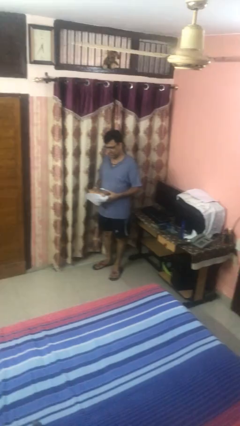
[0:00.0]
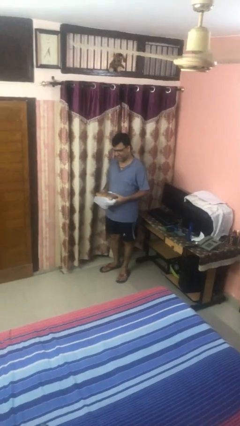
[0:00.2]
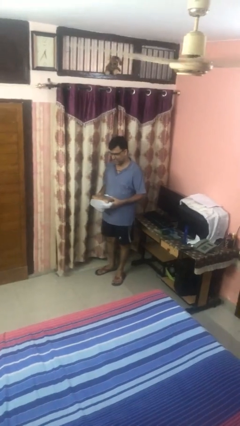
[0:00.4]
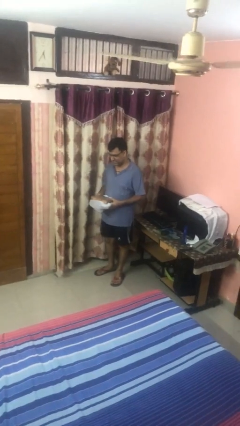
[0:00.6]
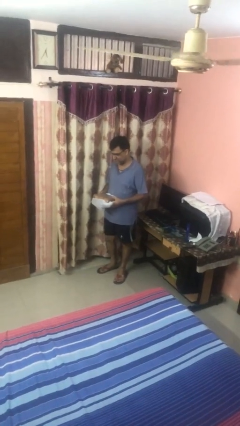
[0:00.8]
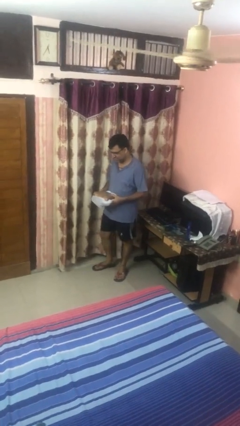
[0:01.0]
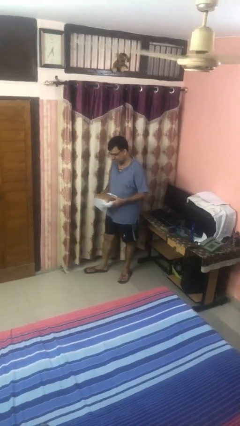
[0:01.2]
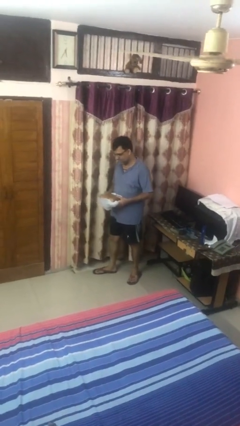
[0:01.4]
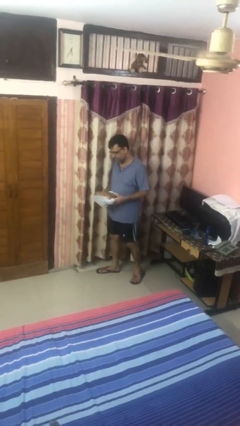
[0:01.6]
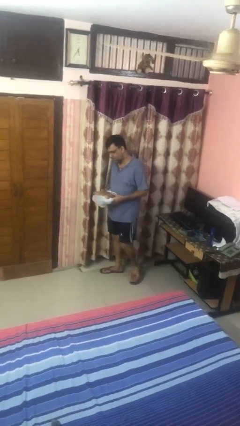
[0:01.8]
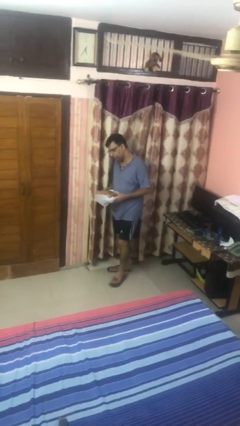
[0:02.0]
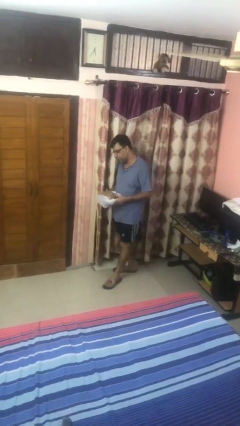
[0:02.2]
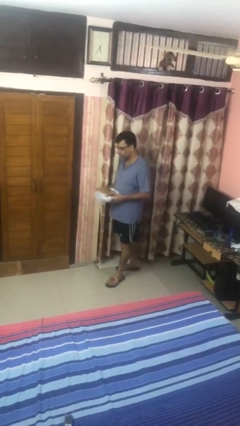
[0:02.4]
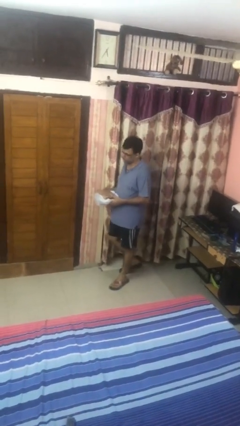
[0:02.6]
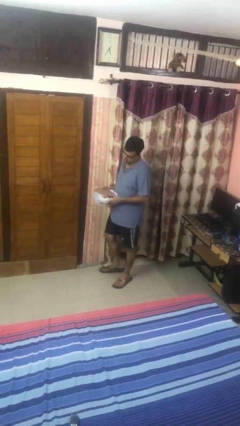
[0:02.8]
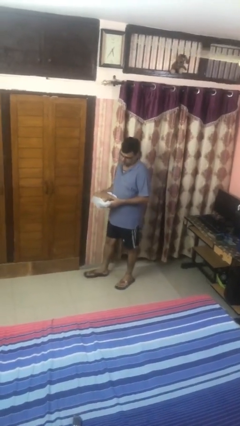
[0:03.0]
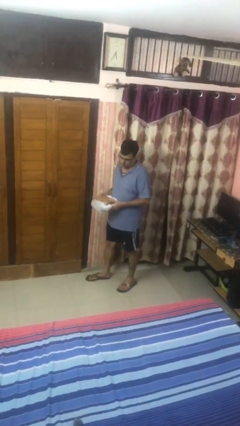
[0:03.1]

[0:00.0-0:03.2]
person carries groceries

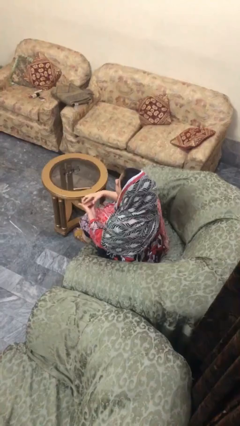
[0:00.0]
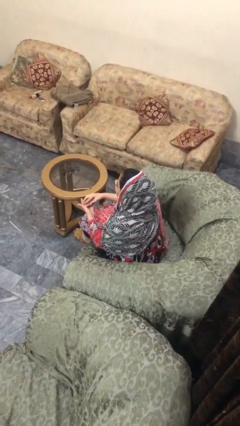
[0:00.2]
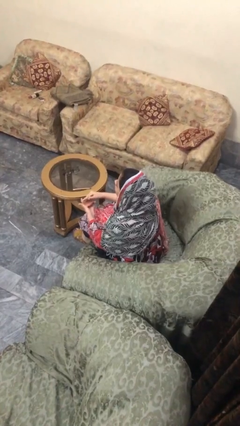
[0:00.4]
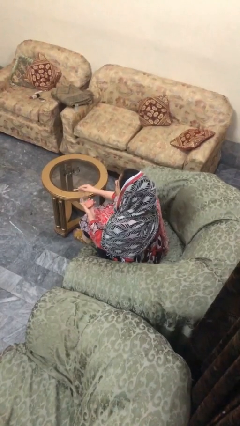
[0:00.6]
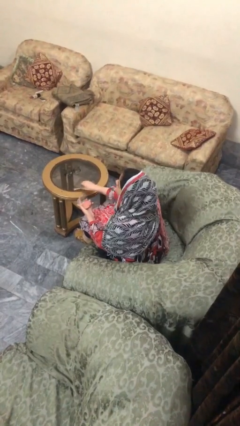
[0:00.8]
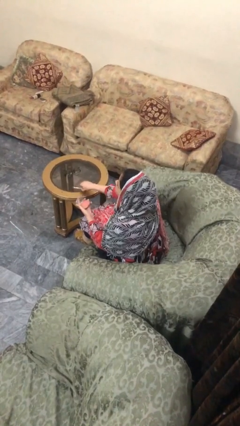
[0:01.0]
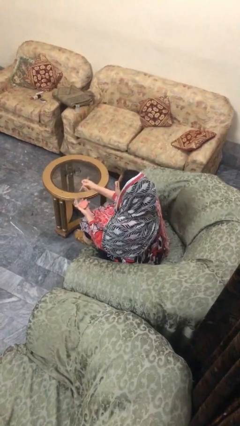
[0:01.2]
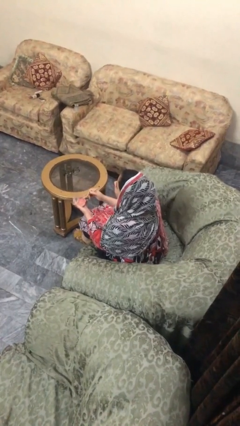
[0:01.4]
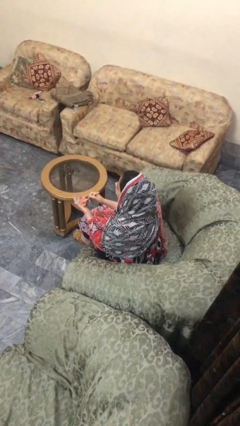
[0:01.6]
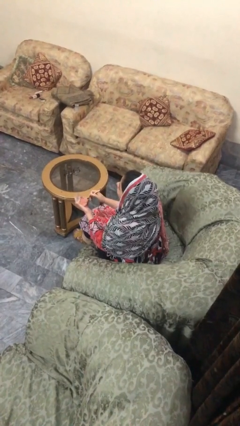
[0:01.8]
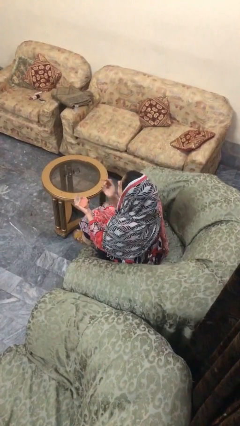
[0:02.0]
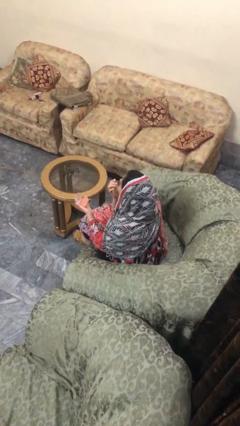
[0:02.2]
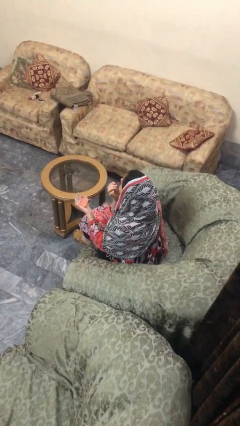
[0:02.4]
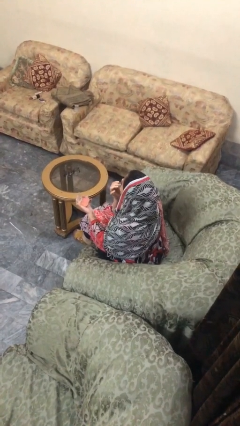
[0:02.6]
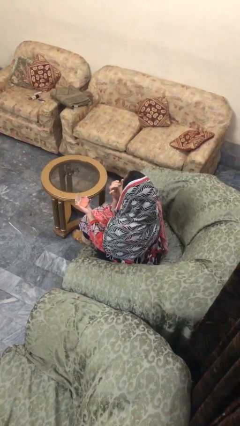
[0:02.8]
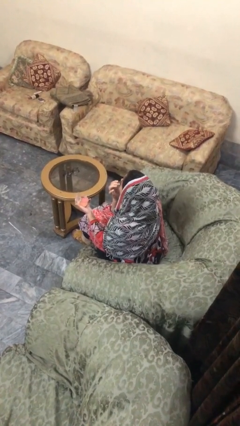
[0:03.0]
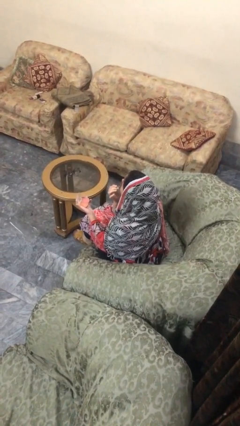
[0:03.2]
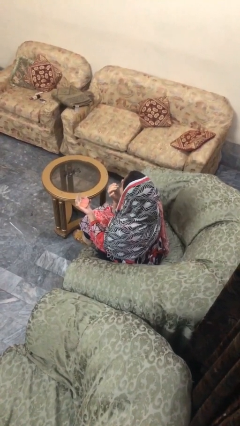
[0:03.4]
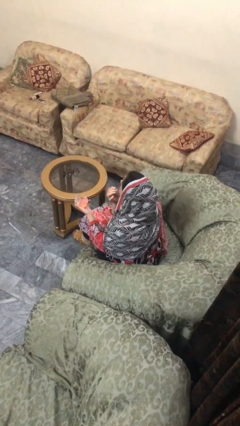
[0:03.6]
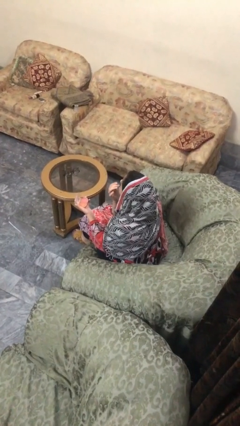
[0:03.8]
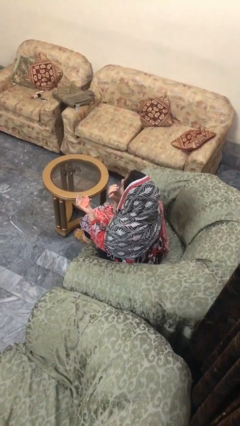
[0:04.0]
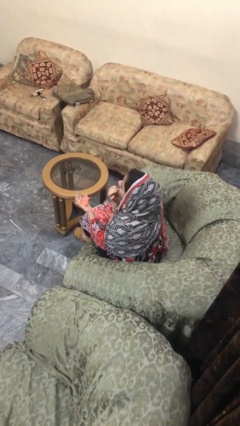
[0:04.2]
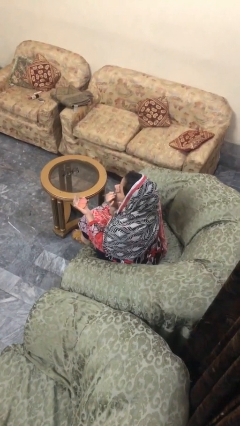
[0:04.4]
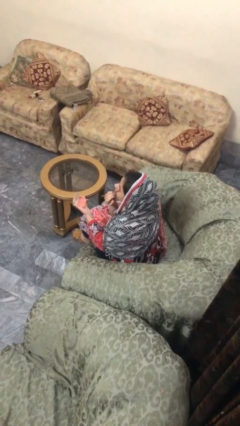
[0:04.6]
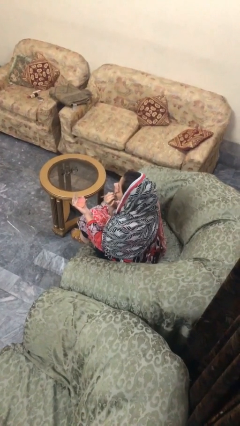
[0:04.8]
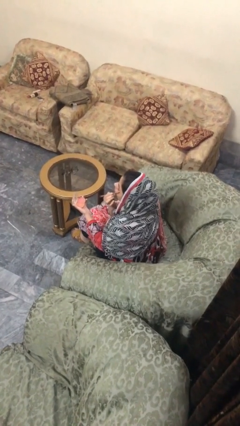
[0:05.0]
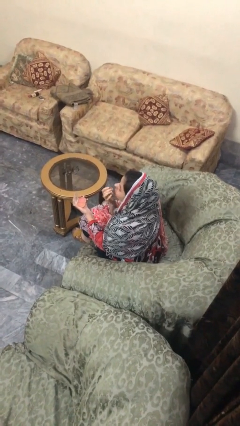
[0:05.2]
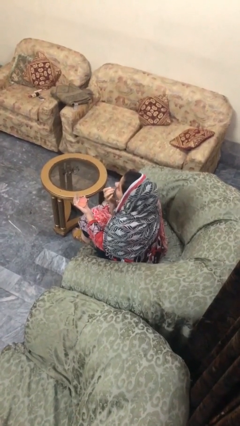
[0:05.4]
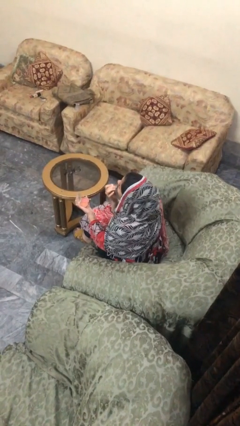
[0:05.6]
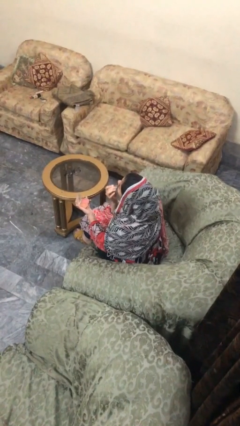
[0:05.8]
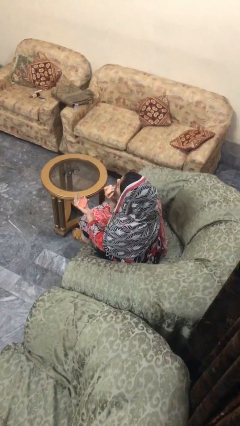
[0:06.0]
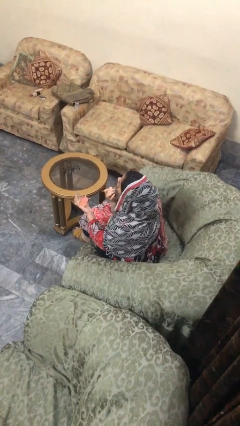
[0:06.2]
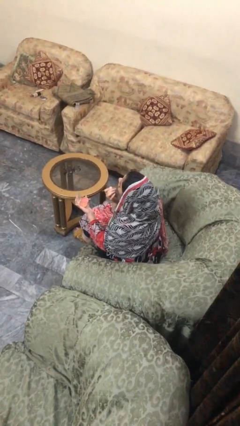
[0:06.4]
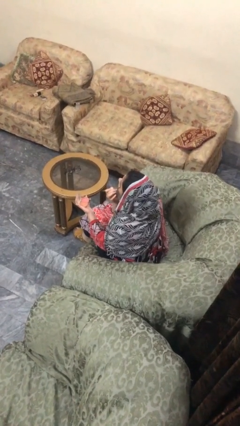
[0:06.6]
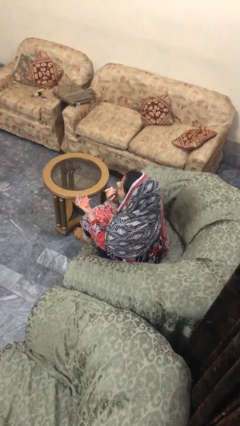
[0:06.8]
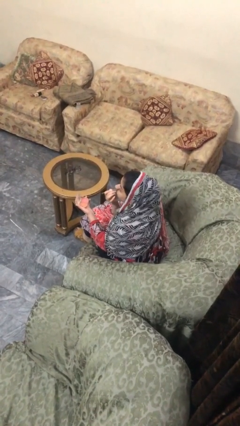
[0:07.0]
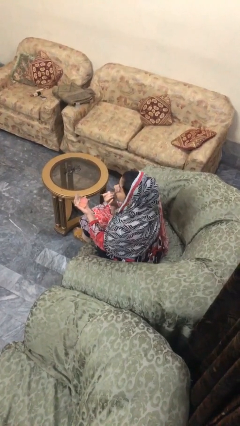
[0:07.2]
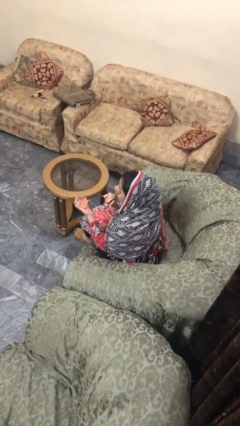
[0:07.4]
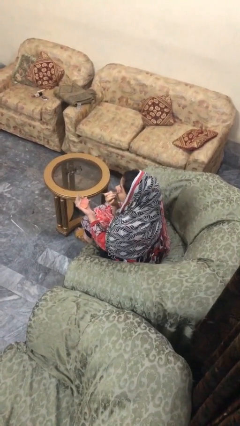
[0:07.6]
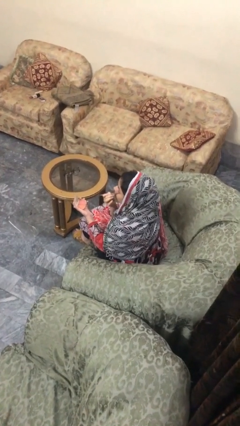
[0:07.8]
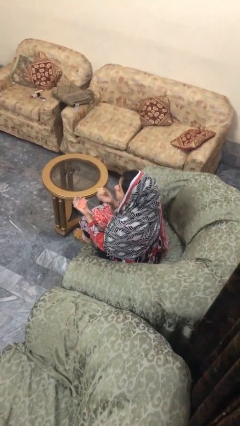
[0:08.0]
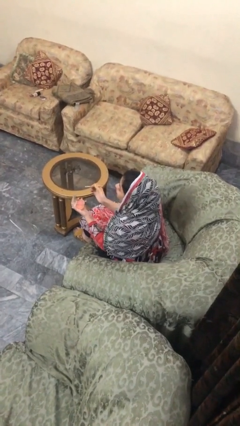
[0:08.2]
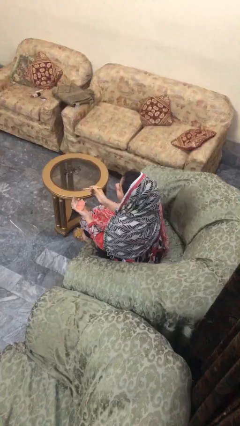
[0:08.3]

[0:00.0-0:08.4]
person applies eye makeup

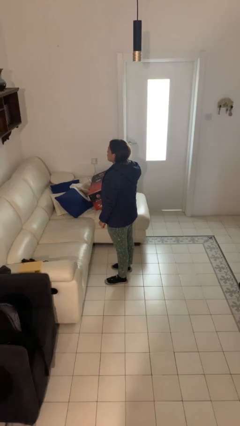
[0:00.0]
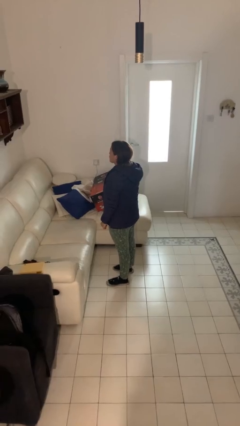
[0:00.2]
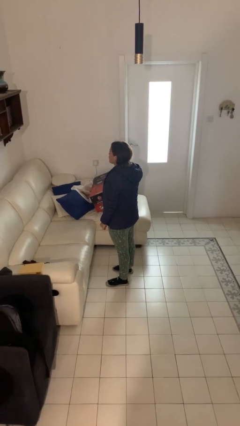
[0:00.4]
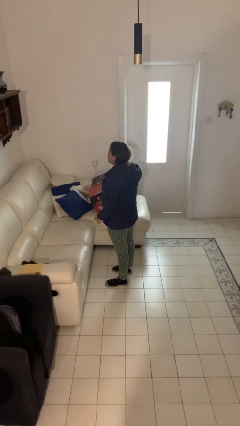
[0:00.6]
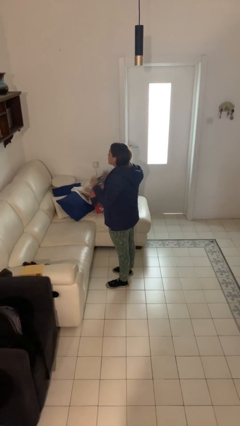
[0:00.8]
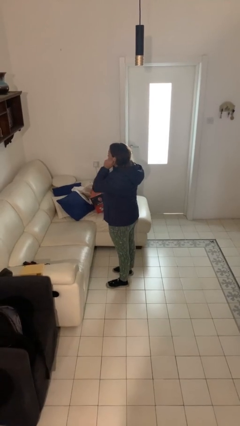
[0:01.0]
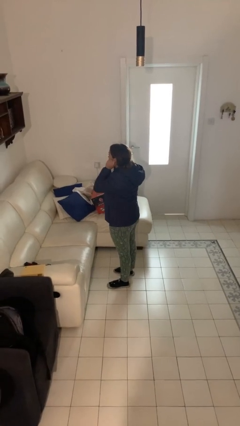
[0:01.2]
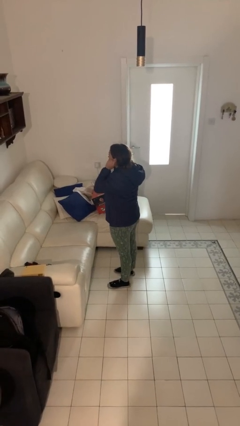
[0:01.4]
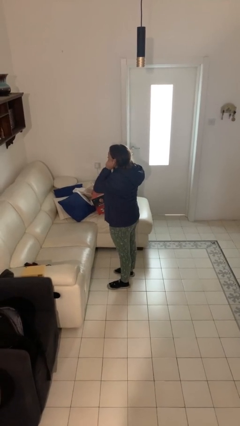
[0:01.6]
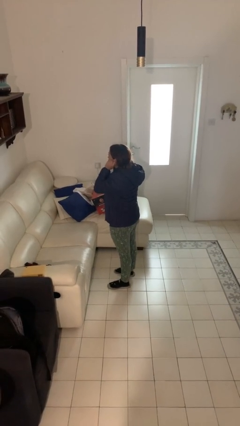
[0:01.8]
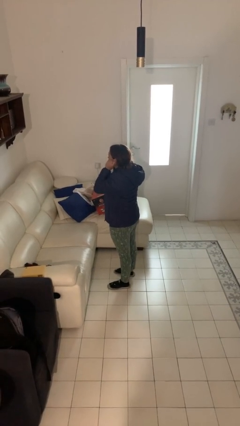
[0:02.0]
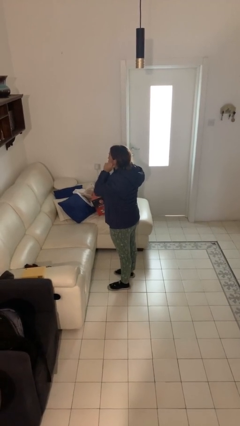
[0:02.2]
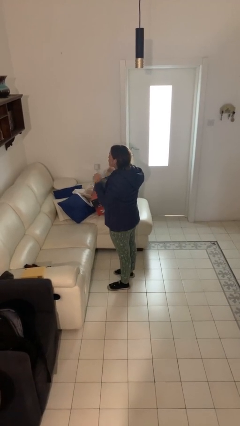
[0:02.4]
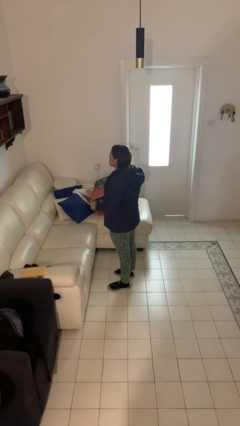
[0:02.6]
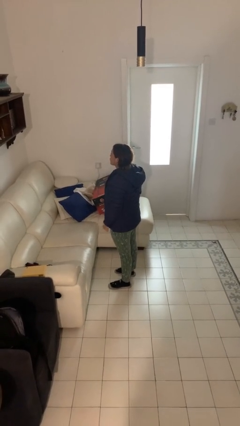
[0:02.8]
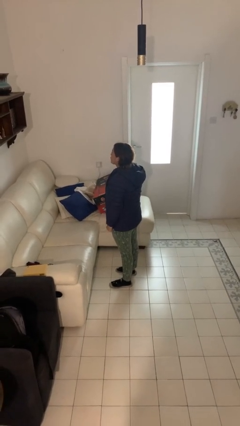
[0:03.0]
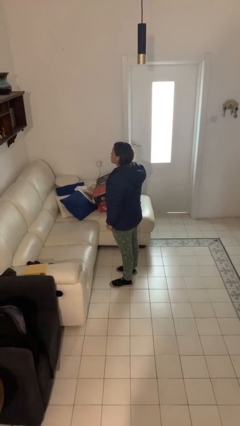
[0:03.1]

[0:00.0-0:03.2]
person touches earlobe

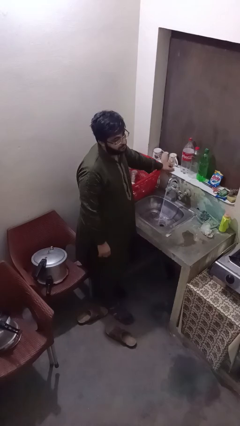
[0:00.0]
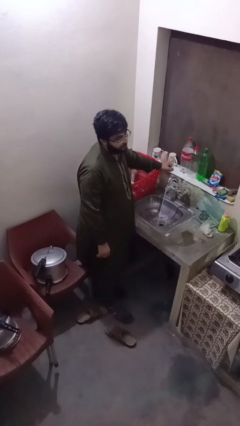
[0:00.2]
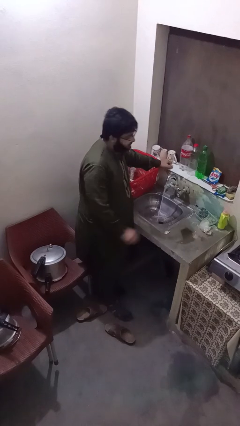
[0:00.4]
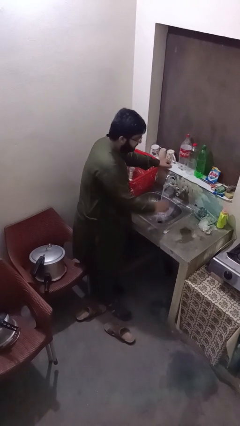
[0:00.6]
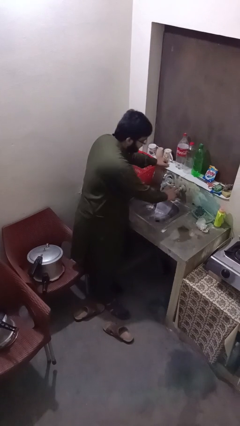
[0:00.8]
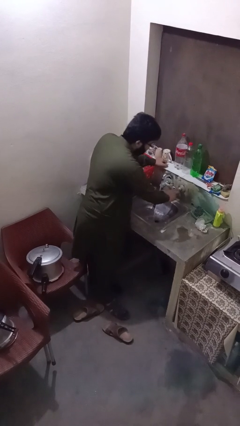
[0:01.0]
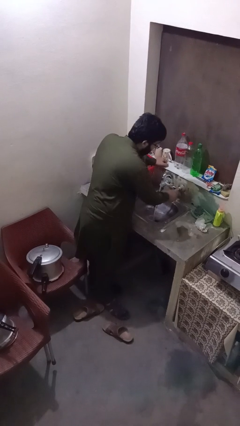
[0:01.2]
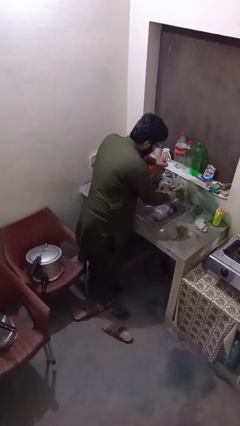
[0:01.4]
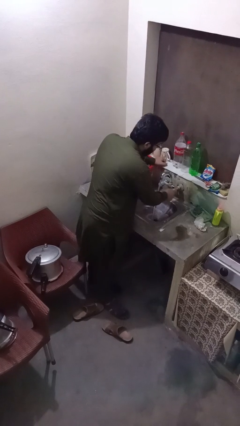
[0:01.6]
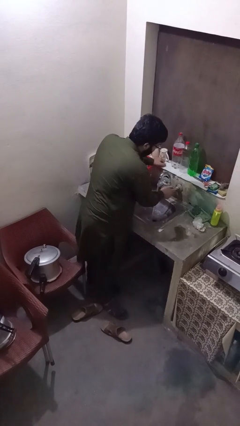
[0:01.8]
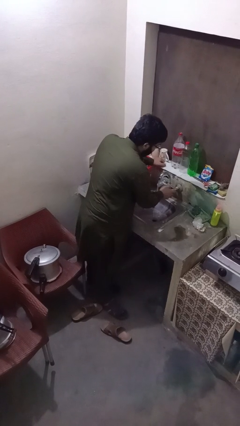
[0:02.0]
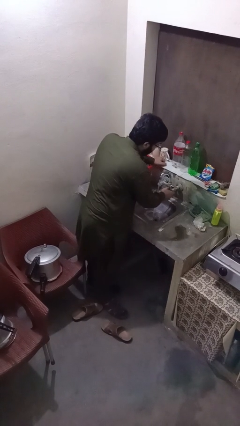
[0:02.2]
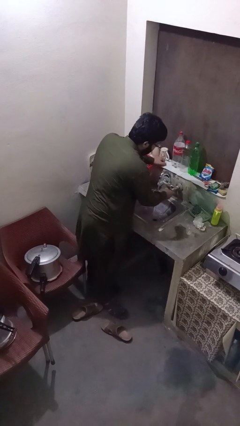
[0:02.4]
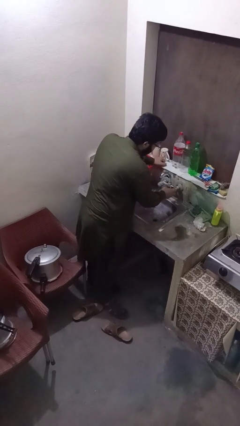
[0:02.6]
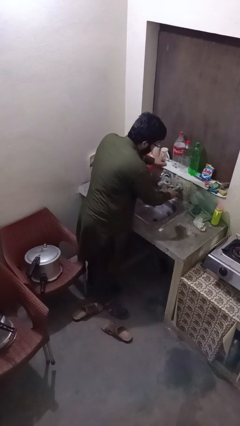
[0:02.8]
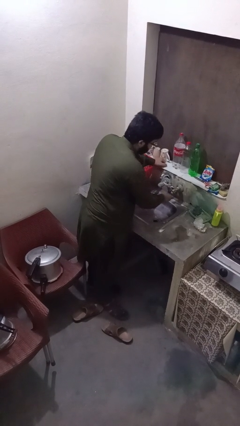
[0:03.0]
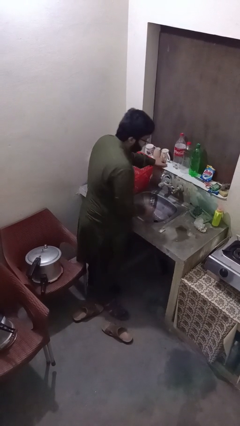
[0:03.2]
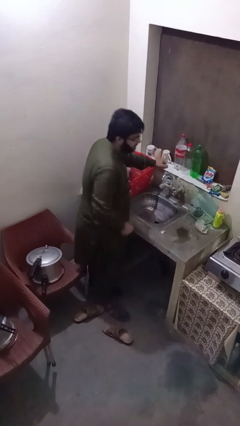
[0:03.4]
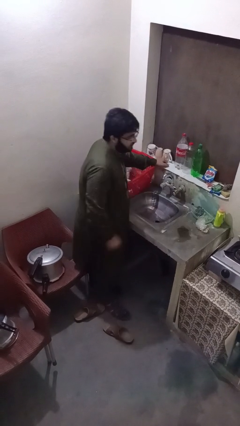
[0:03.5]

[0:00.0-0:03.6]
person turns off faucet
